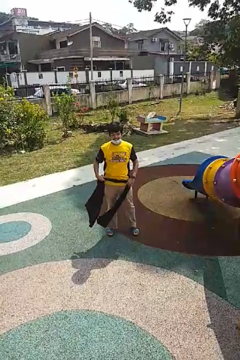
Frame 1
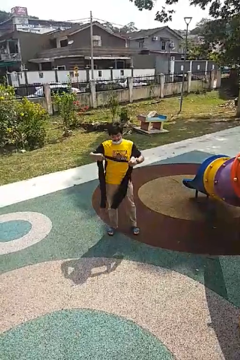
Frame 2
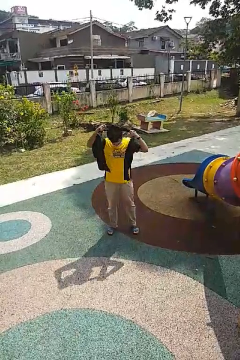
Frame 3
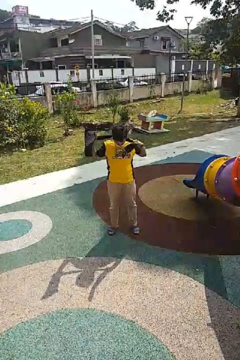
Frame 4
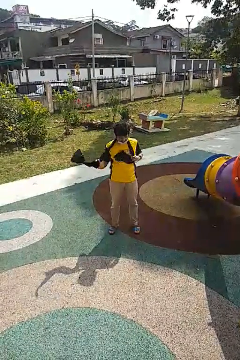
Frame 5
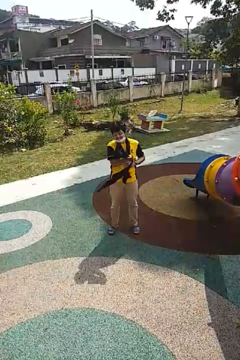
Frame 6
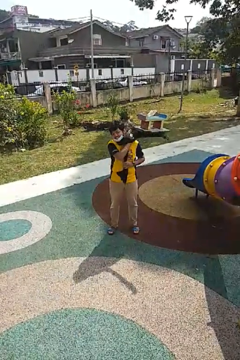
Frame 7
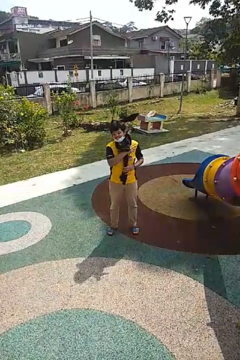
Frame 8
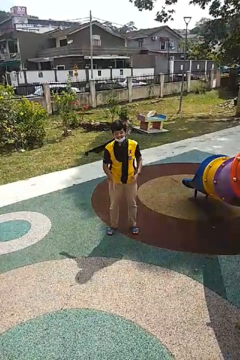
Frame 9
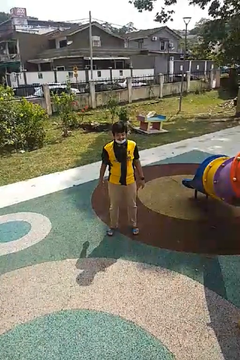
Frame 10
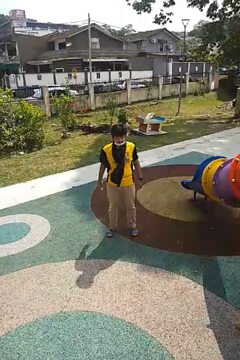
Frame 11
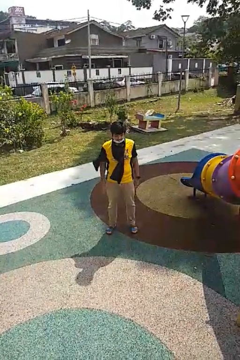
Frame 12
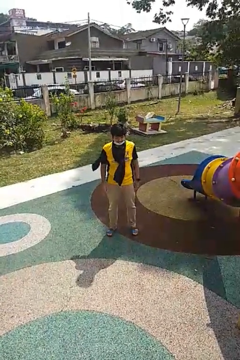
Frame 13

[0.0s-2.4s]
person puts on scarf

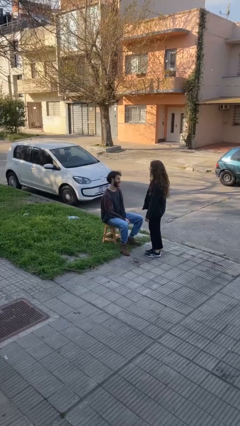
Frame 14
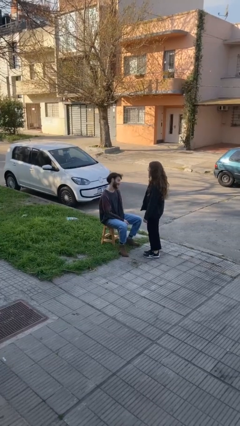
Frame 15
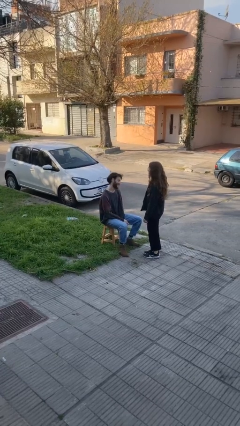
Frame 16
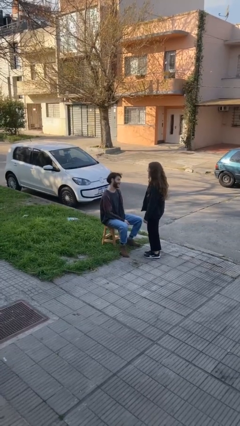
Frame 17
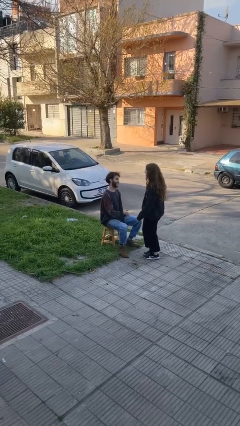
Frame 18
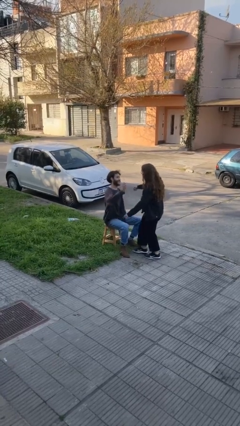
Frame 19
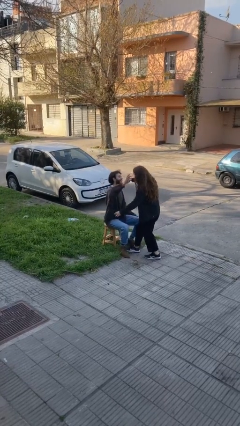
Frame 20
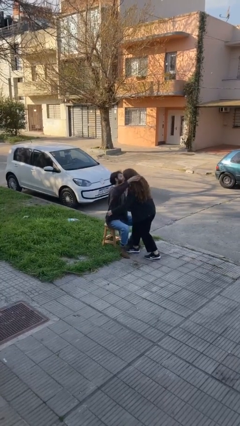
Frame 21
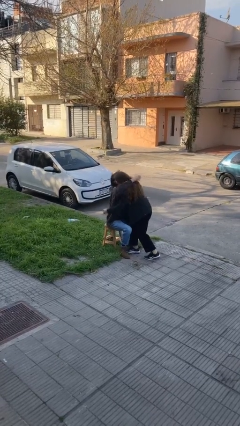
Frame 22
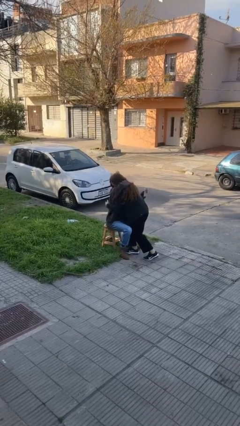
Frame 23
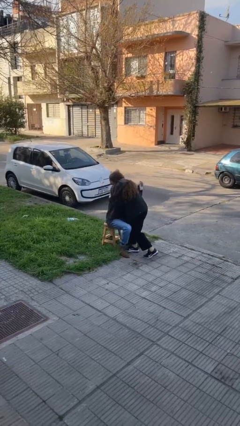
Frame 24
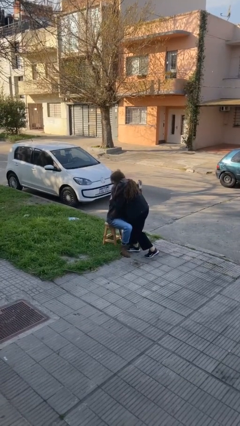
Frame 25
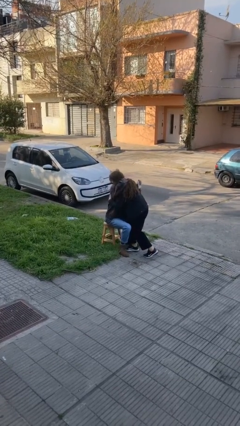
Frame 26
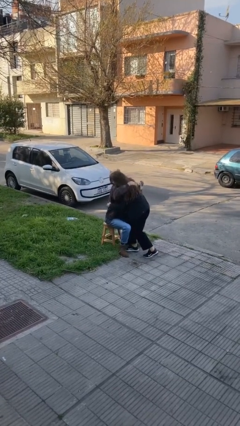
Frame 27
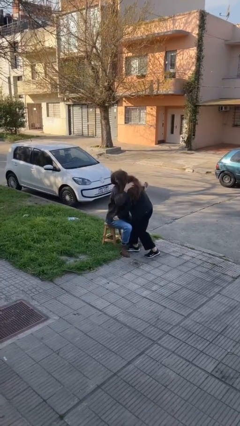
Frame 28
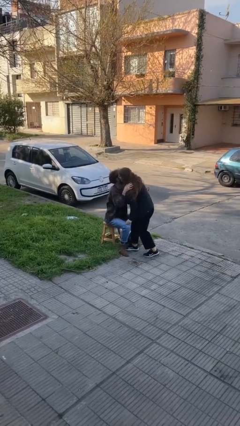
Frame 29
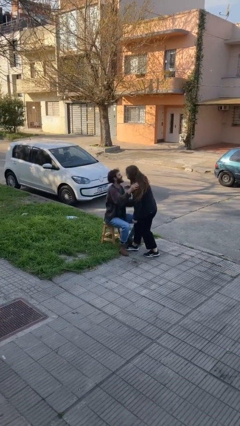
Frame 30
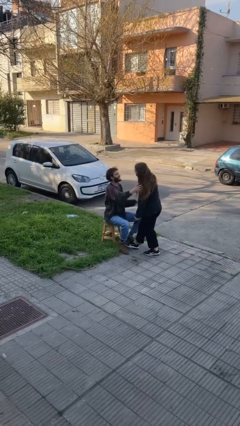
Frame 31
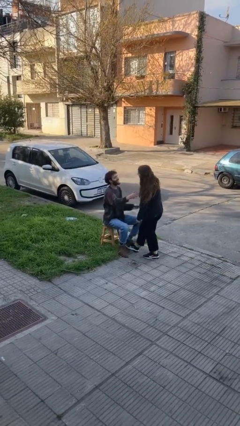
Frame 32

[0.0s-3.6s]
person embraces person

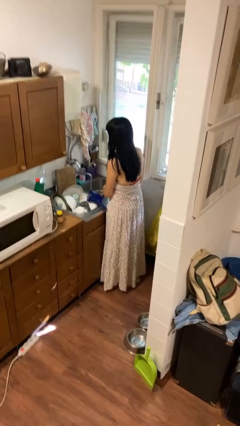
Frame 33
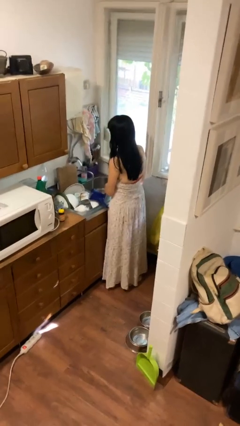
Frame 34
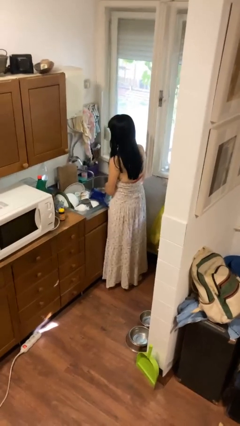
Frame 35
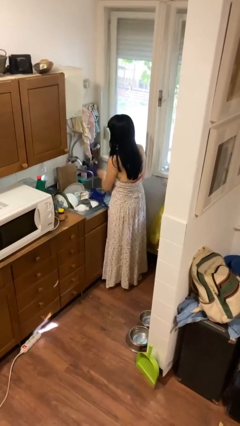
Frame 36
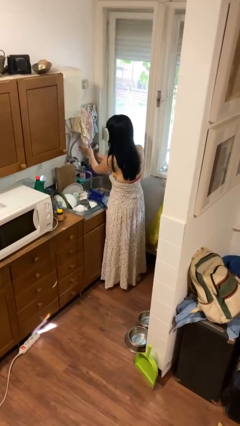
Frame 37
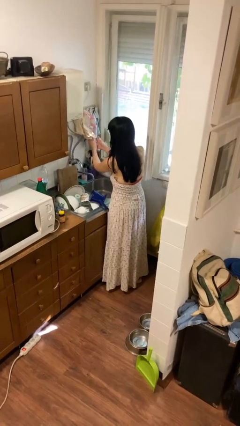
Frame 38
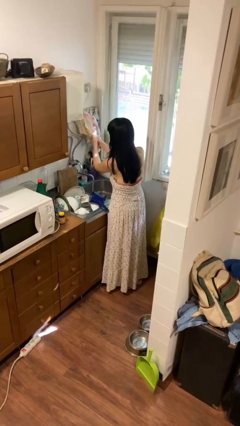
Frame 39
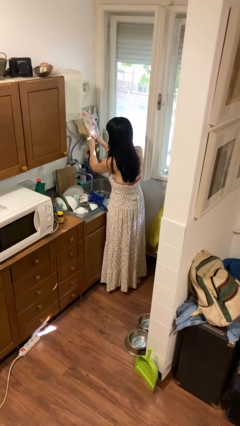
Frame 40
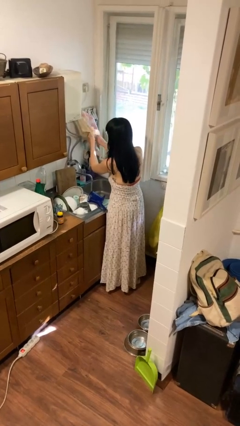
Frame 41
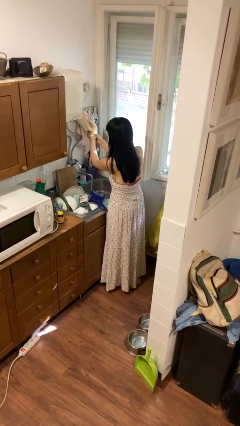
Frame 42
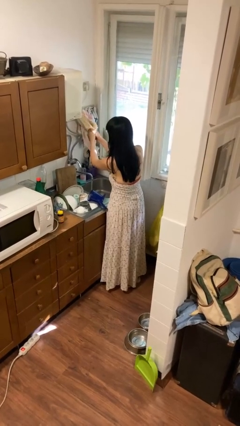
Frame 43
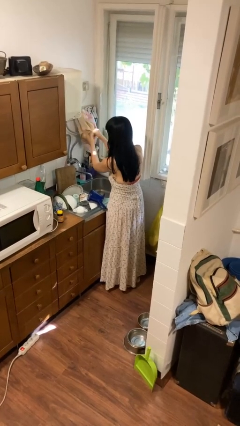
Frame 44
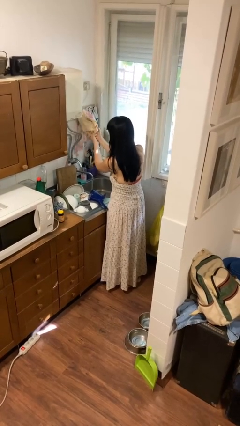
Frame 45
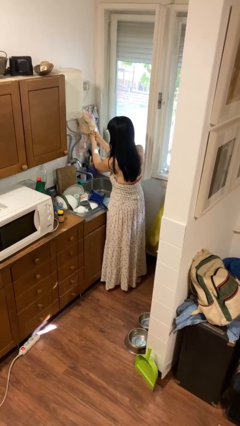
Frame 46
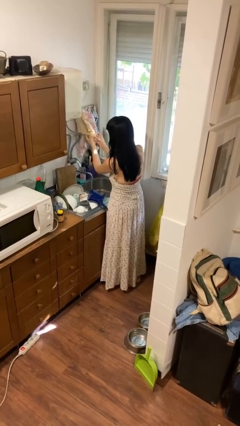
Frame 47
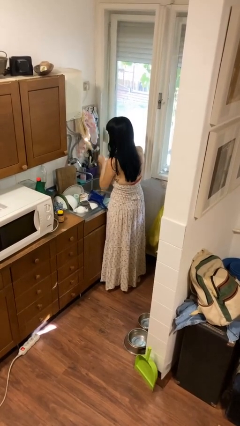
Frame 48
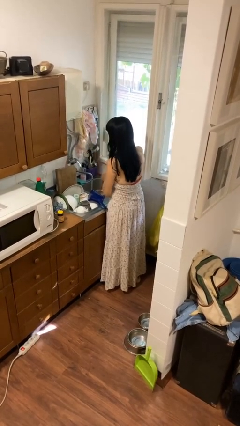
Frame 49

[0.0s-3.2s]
person dries hands with towel

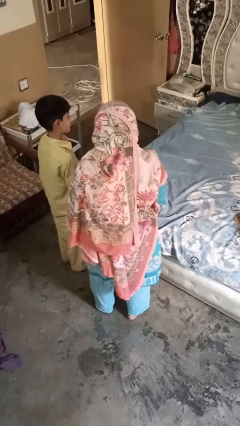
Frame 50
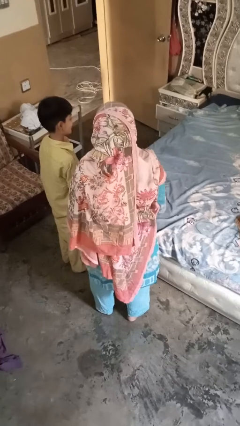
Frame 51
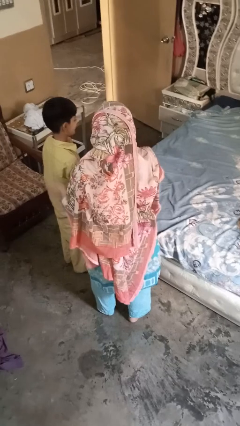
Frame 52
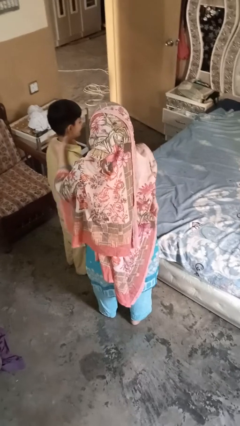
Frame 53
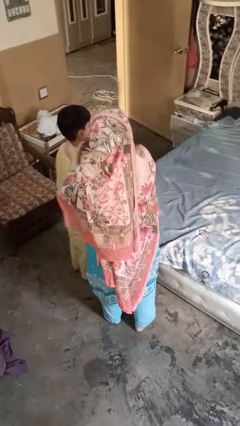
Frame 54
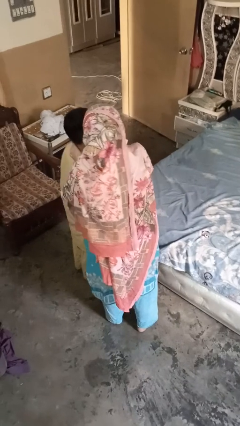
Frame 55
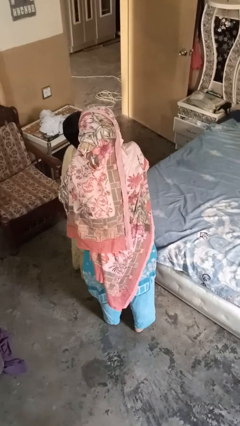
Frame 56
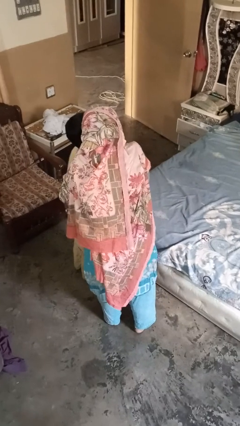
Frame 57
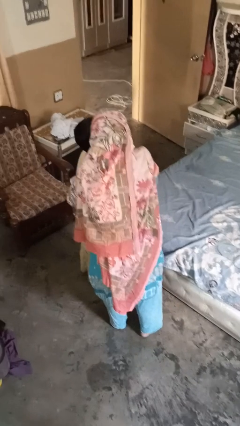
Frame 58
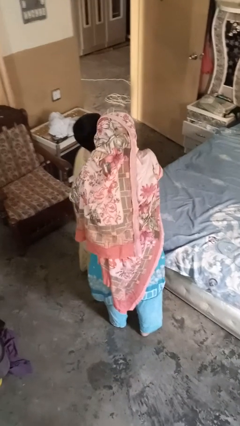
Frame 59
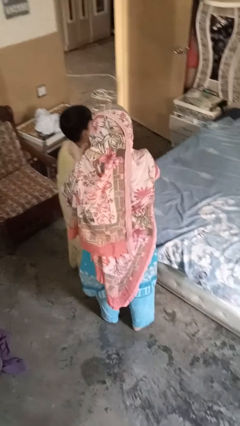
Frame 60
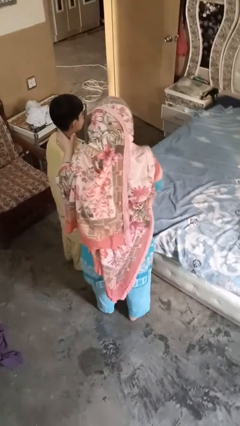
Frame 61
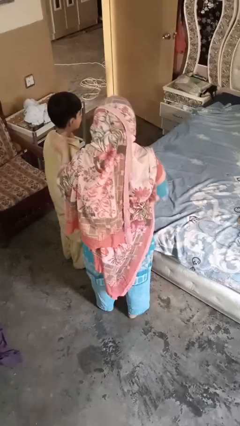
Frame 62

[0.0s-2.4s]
person gestures blow kiss

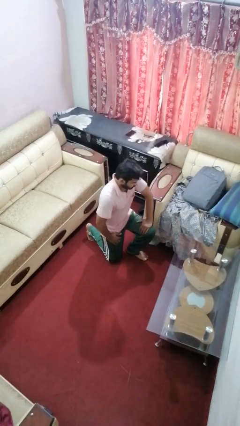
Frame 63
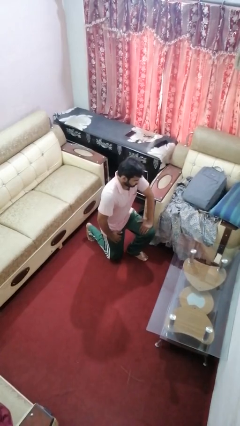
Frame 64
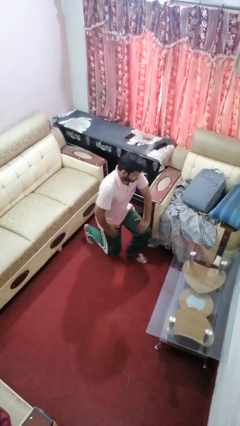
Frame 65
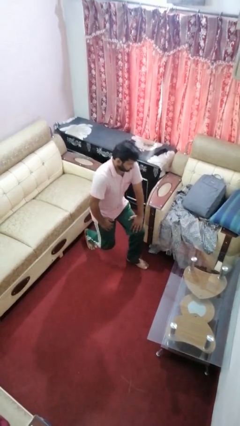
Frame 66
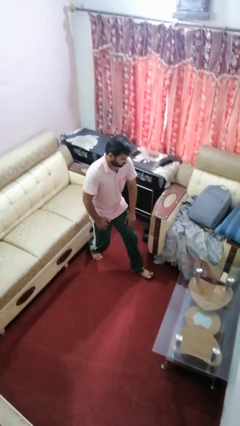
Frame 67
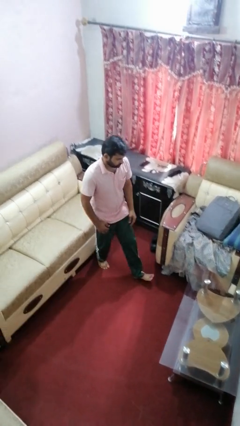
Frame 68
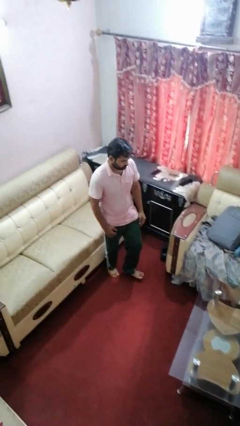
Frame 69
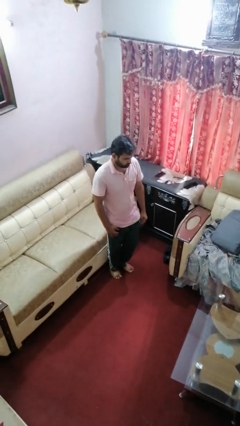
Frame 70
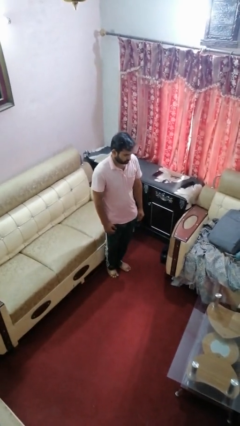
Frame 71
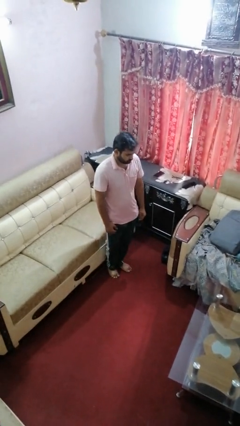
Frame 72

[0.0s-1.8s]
person stands up from floor

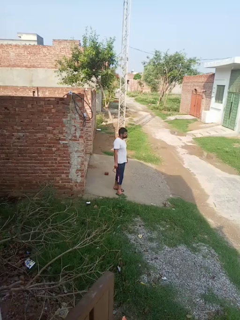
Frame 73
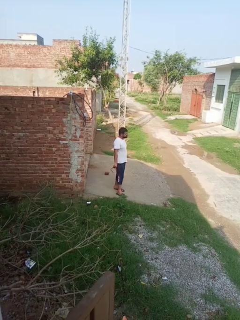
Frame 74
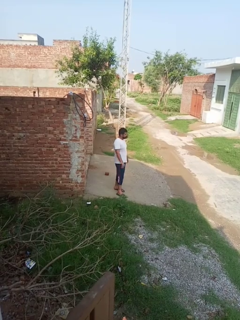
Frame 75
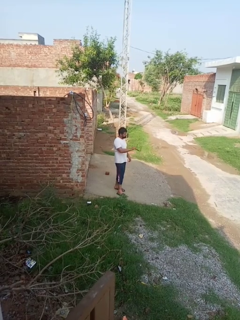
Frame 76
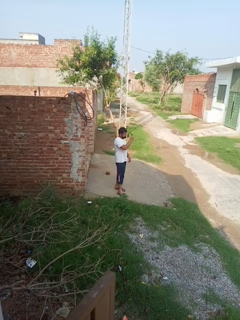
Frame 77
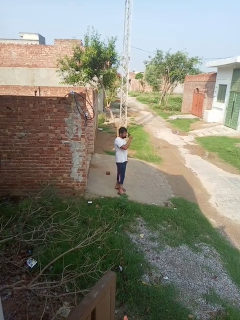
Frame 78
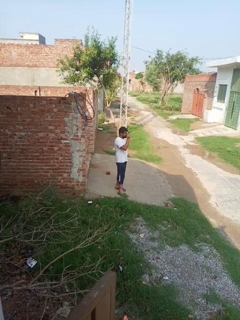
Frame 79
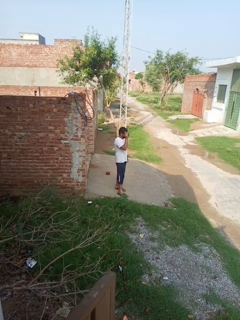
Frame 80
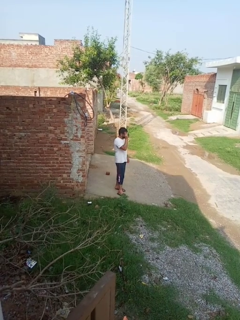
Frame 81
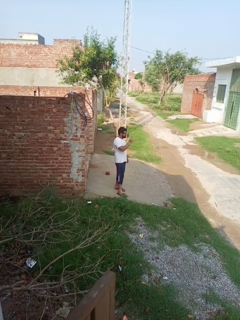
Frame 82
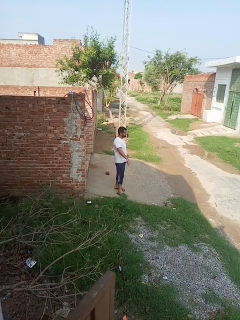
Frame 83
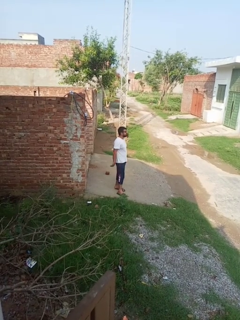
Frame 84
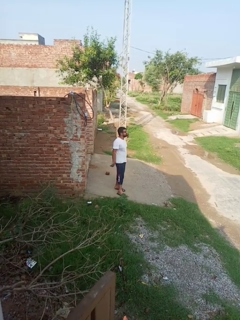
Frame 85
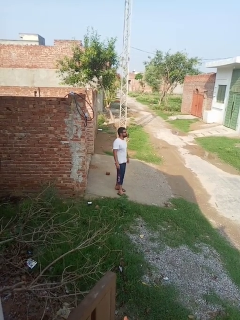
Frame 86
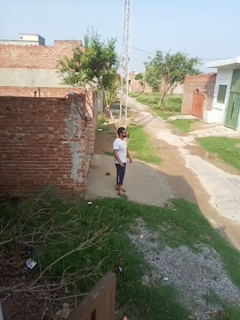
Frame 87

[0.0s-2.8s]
person puts on glasses

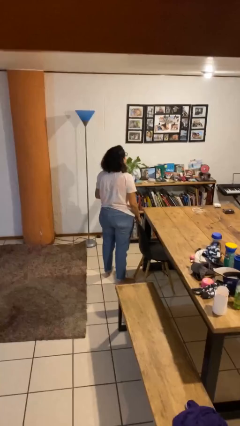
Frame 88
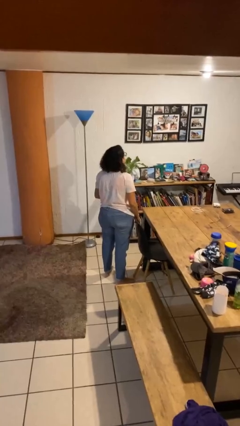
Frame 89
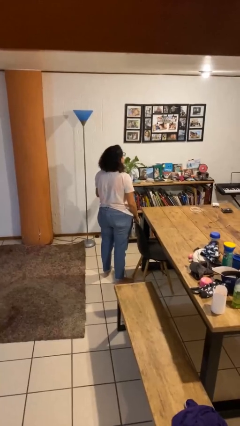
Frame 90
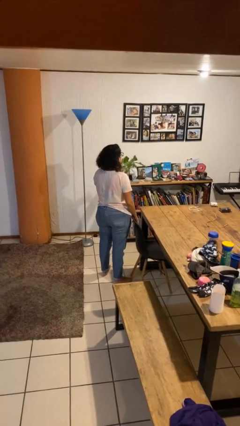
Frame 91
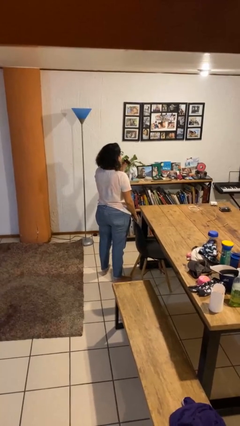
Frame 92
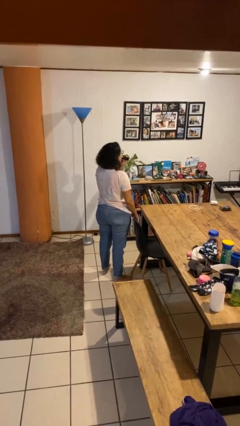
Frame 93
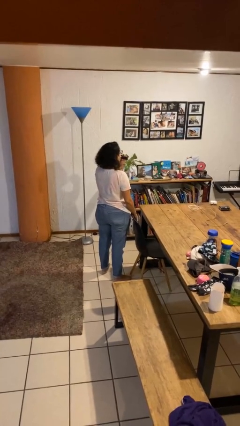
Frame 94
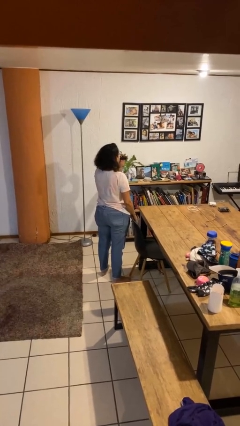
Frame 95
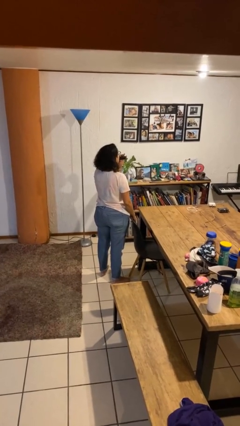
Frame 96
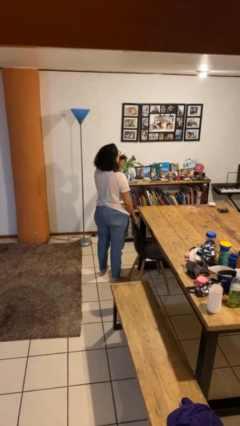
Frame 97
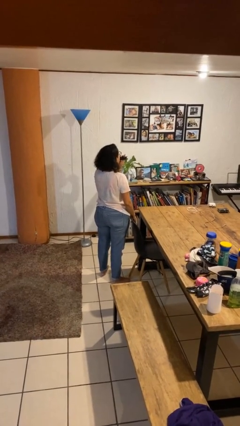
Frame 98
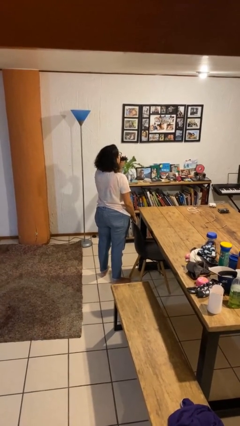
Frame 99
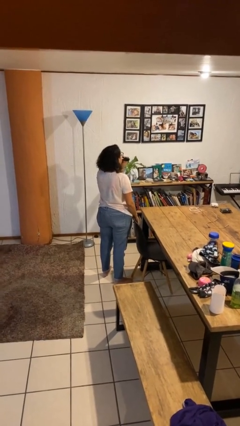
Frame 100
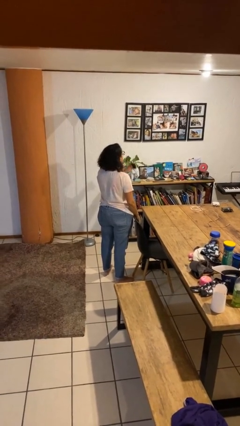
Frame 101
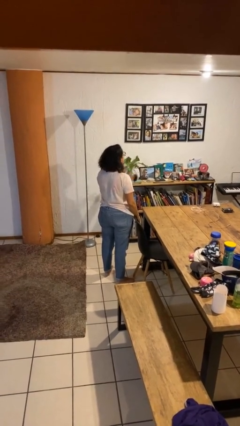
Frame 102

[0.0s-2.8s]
person vapes
